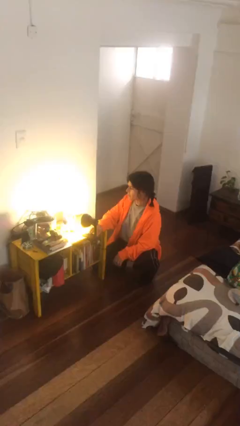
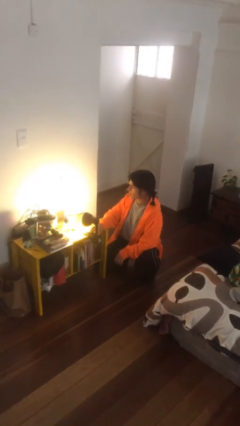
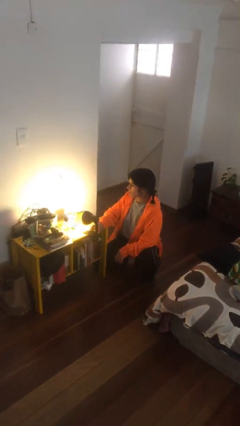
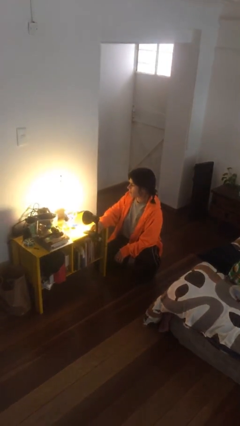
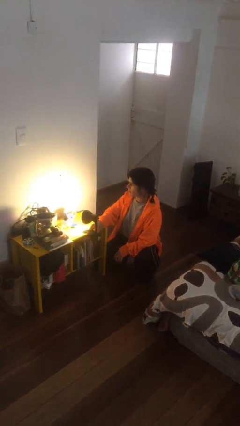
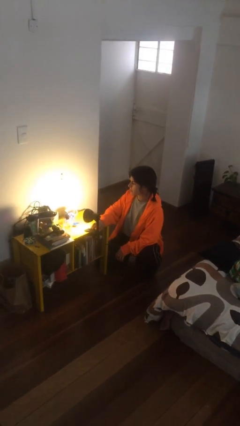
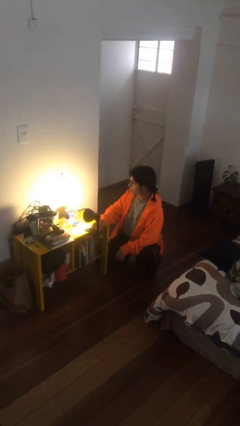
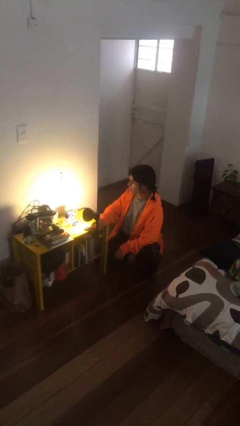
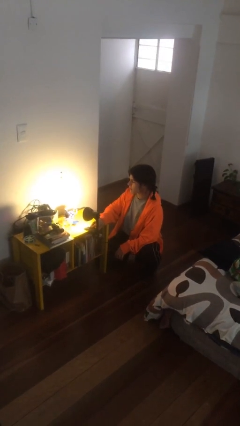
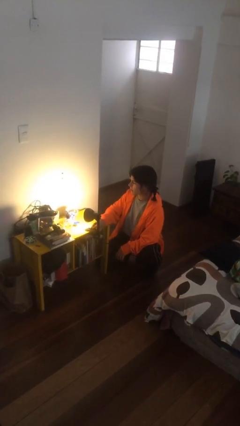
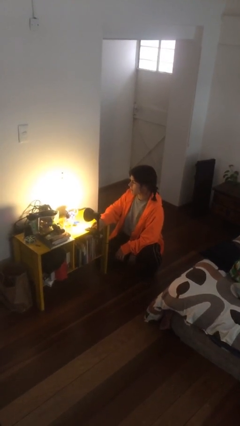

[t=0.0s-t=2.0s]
person turns on lamp

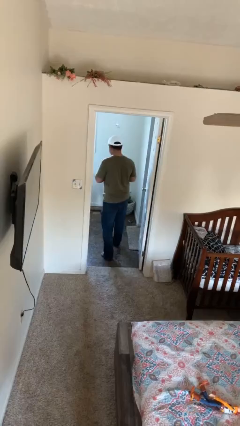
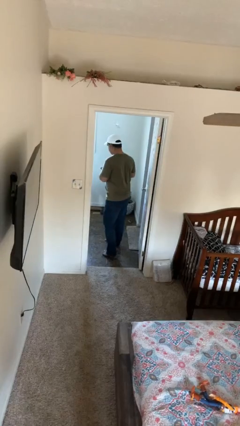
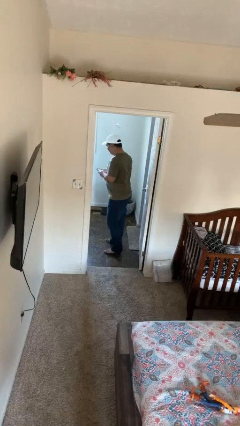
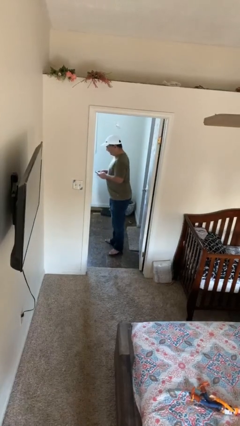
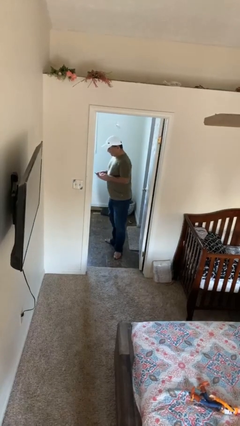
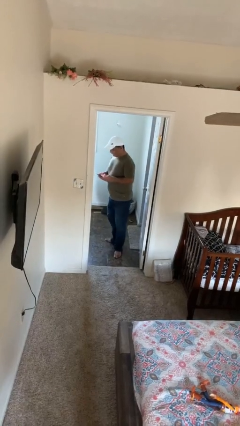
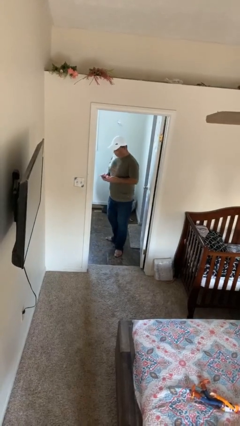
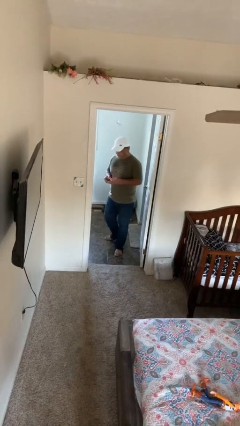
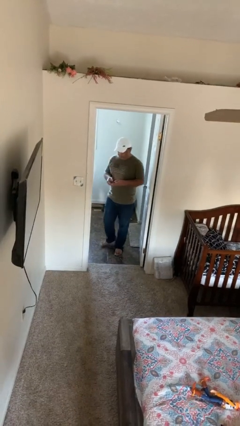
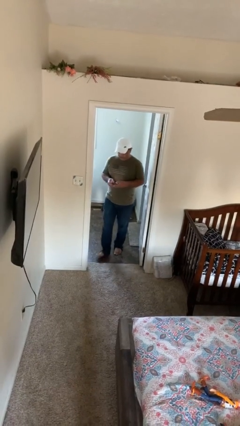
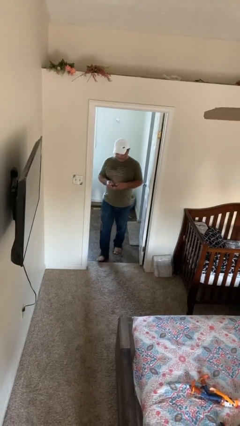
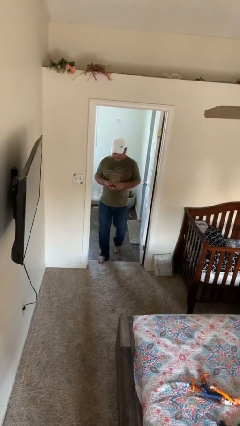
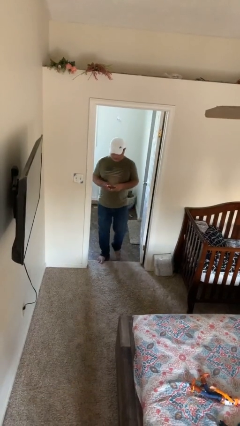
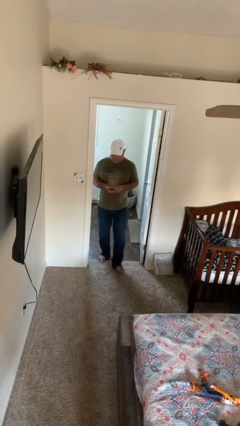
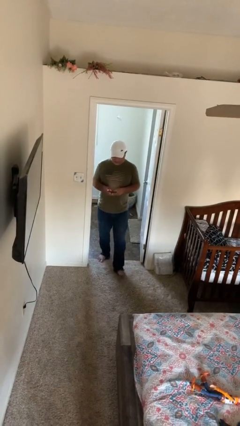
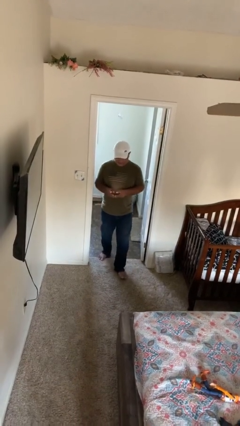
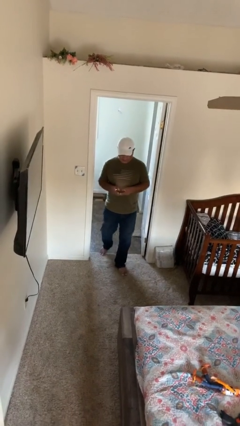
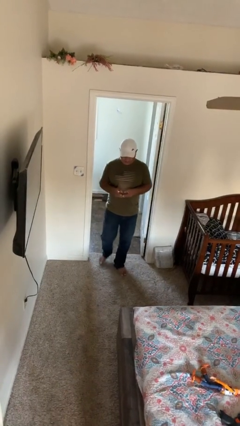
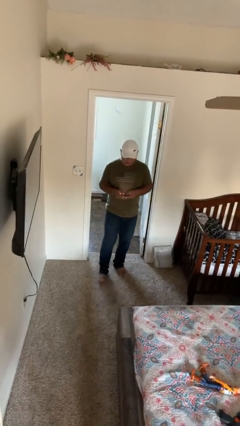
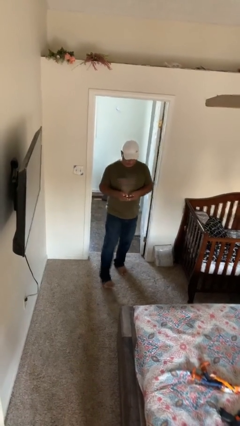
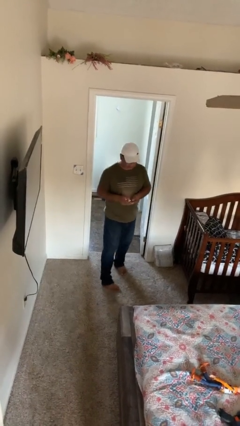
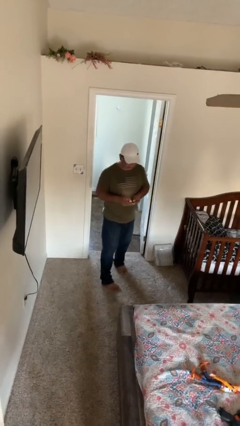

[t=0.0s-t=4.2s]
person enters scene through structure

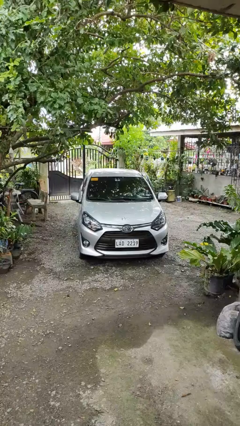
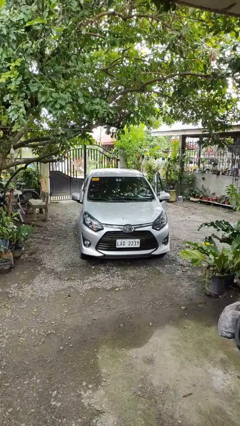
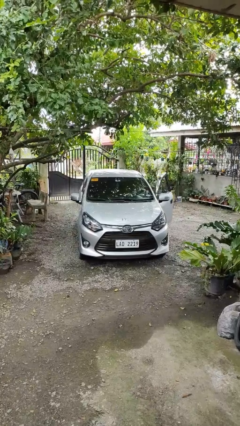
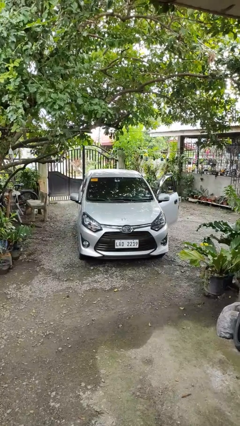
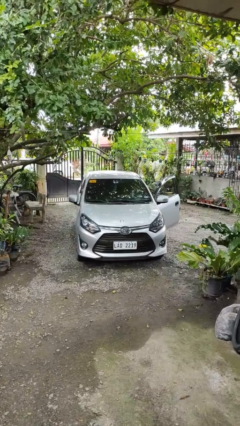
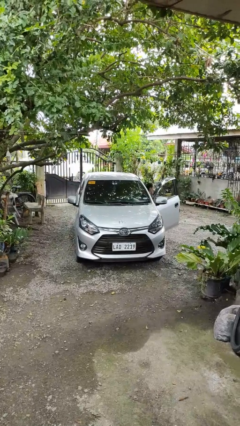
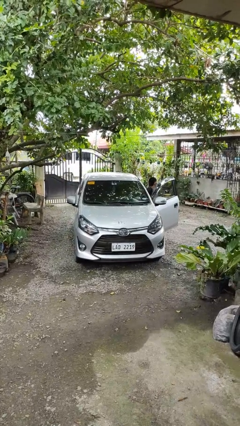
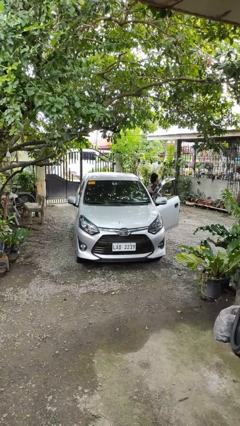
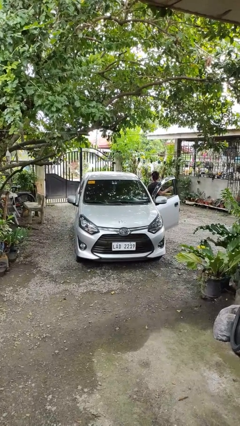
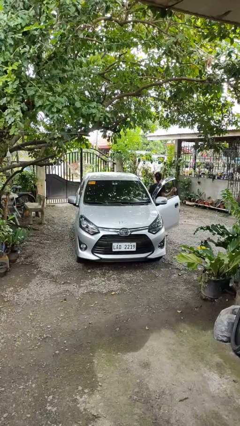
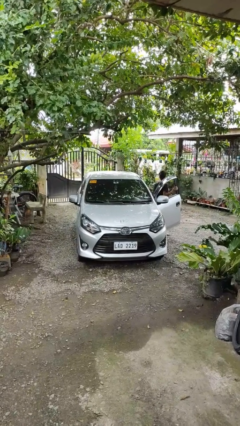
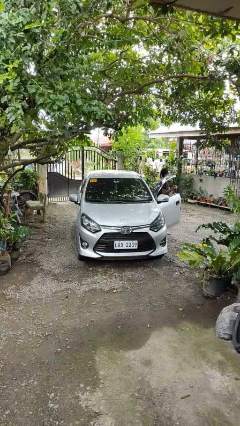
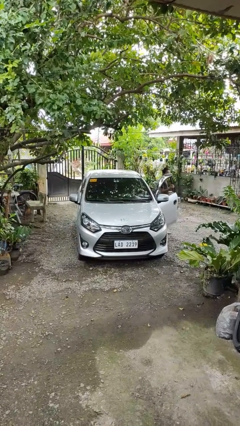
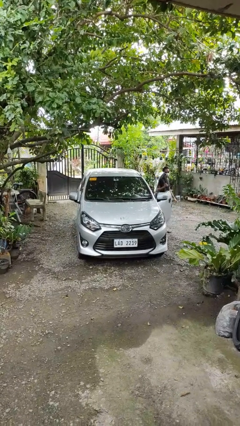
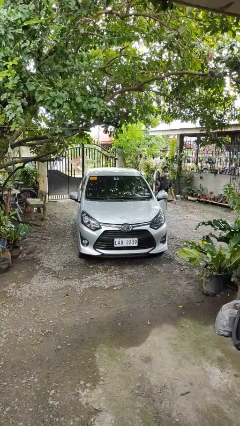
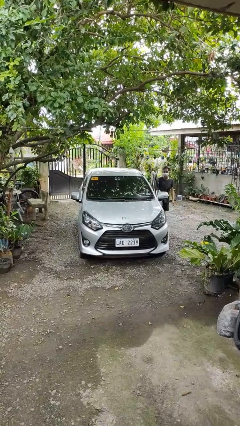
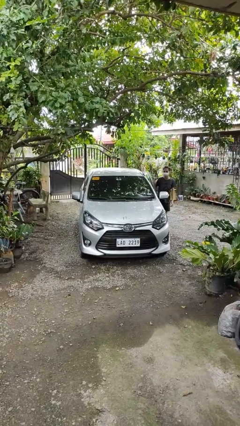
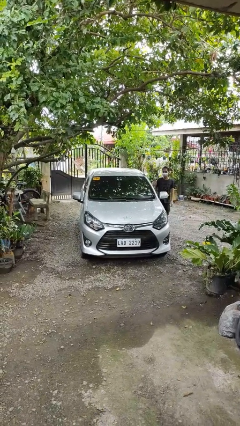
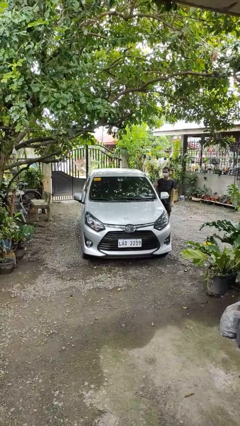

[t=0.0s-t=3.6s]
car drops off person

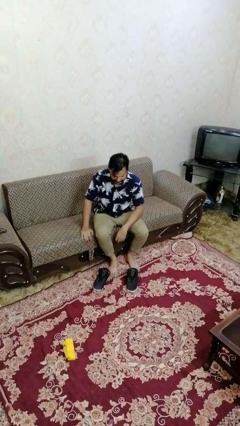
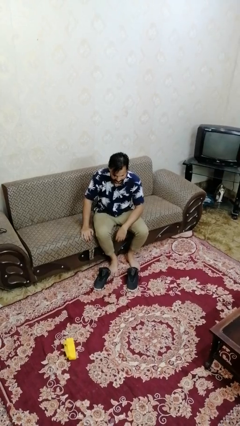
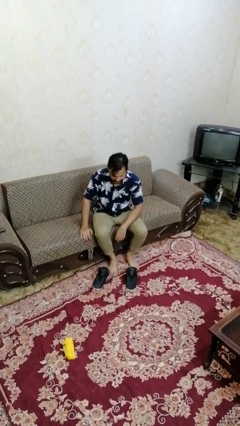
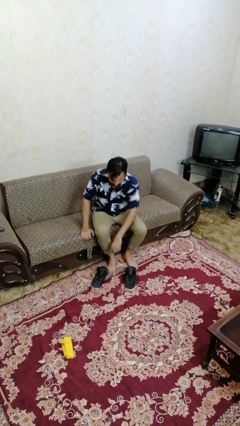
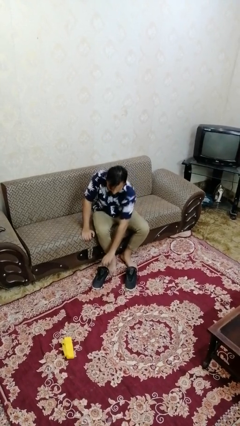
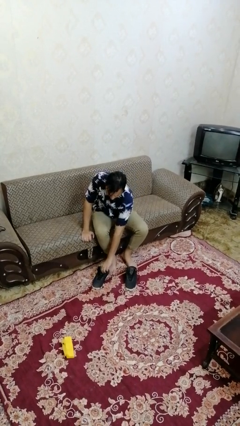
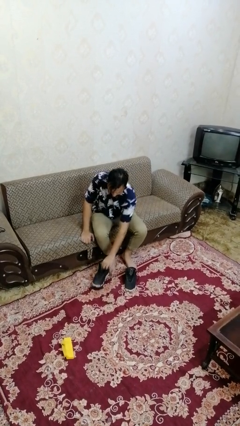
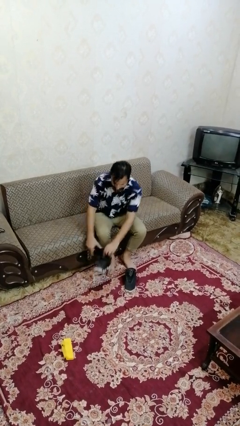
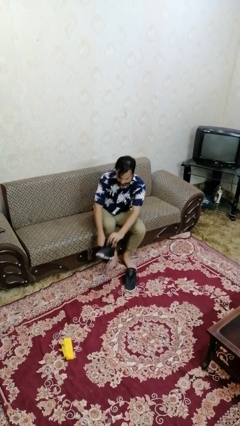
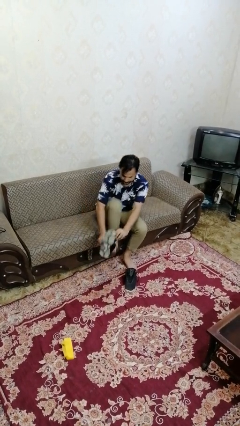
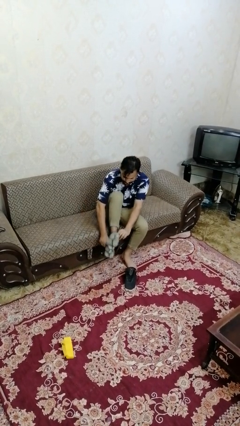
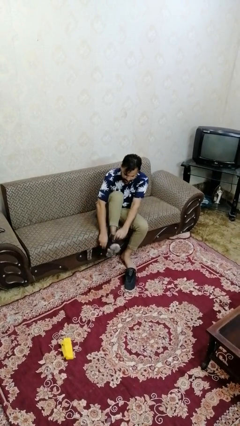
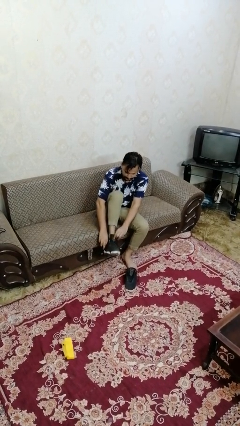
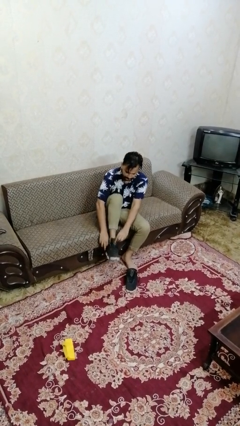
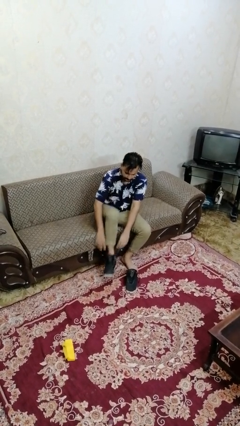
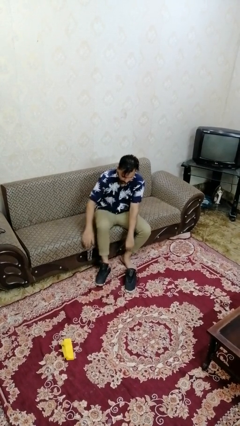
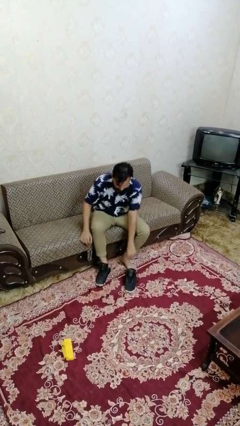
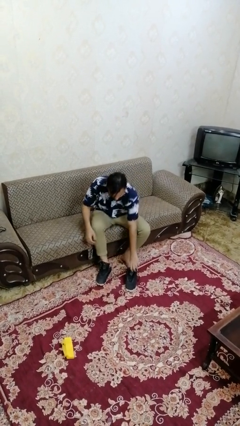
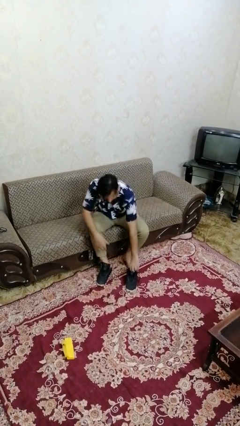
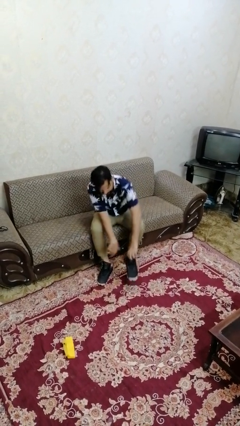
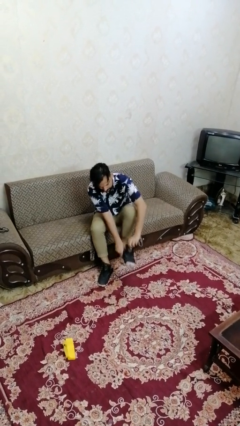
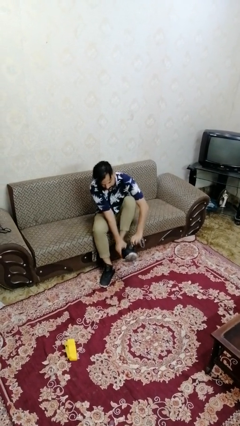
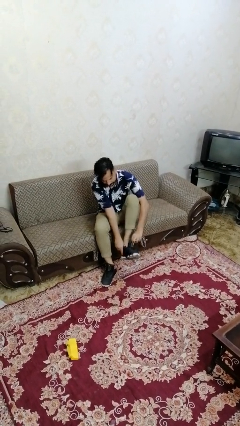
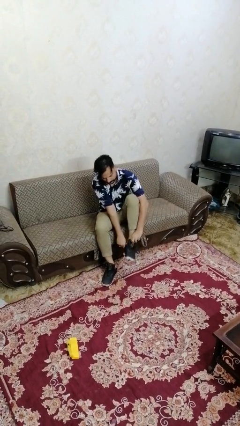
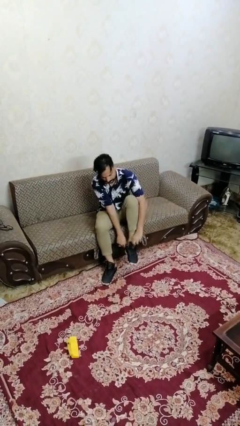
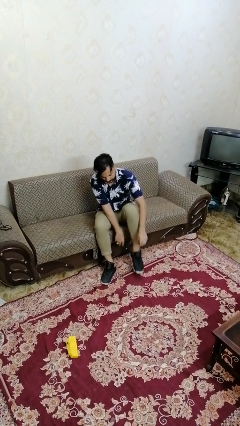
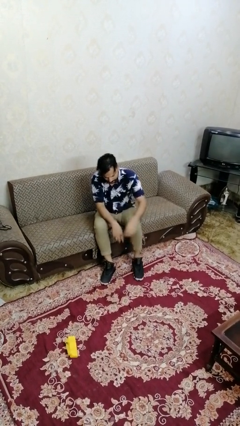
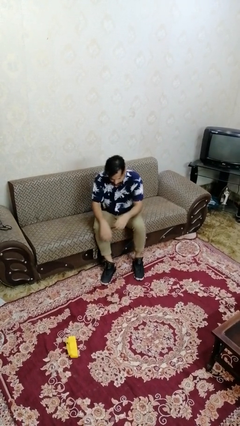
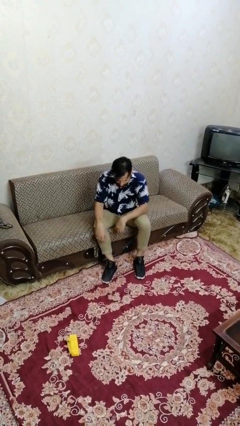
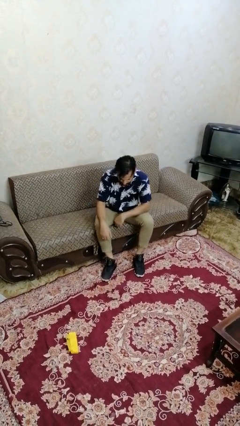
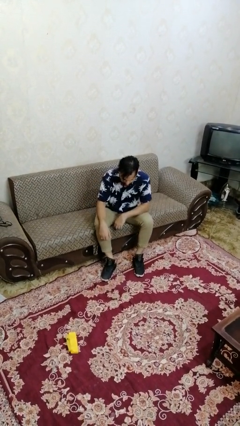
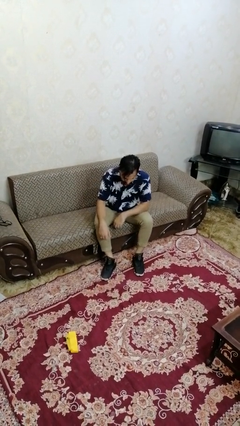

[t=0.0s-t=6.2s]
person puts on shoes

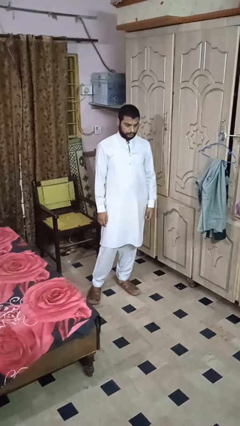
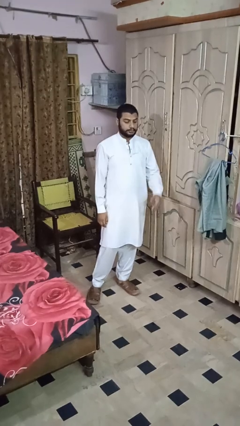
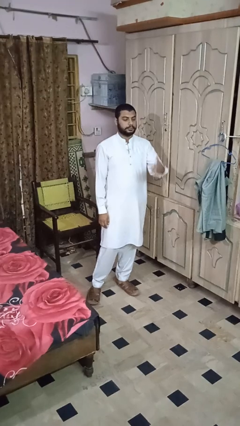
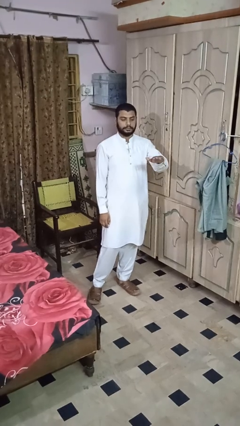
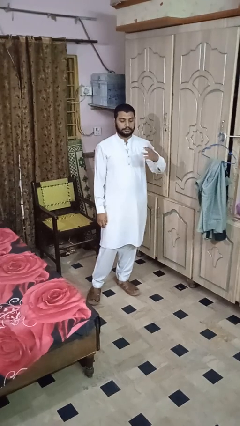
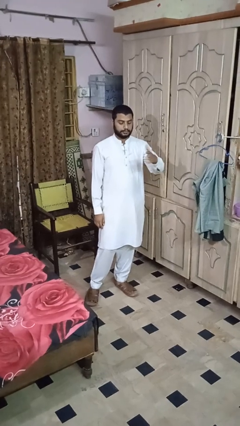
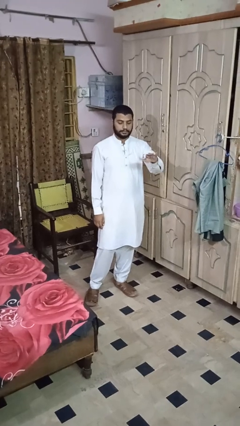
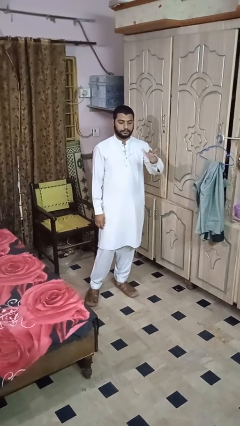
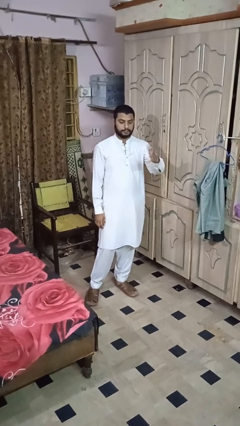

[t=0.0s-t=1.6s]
person shakes head
